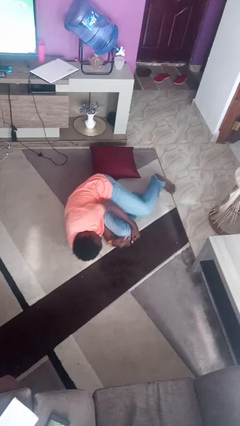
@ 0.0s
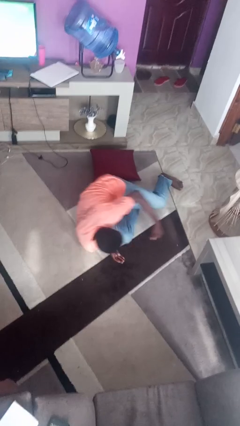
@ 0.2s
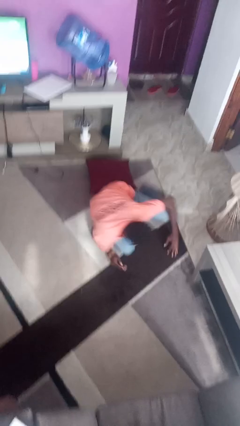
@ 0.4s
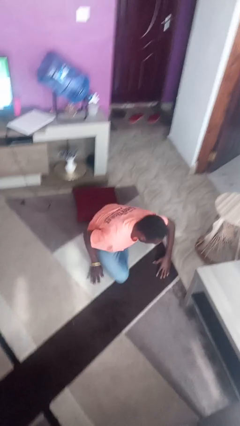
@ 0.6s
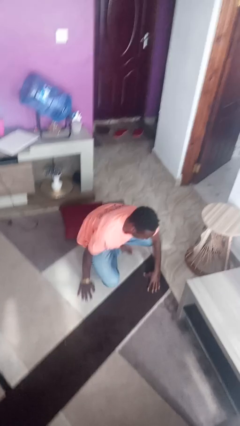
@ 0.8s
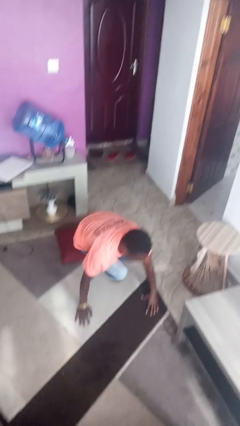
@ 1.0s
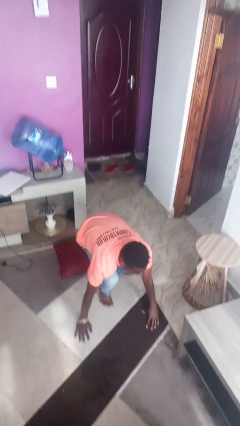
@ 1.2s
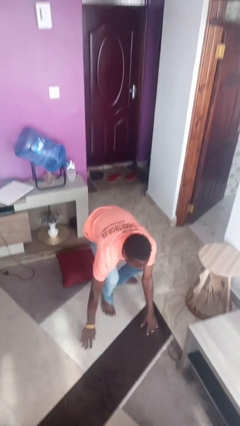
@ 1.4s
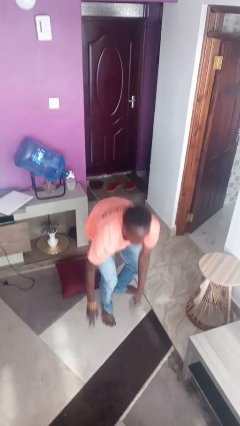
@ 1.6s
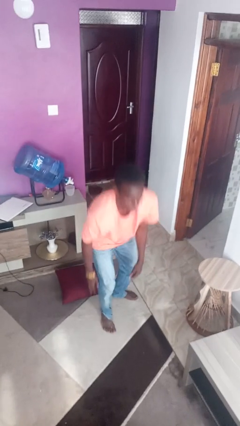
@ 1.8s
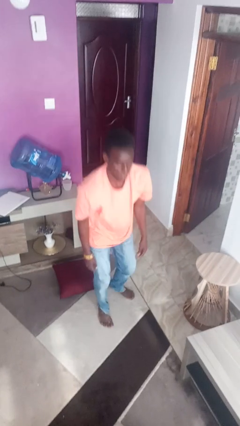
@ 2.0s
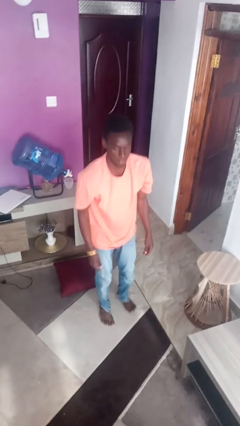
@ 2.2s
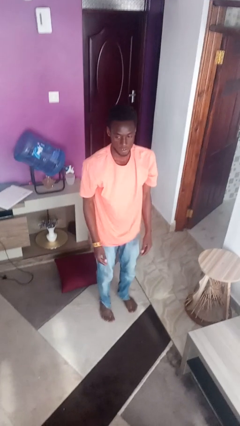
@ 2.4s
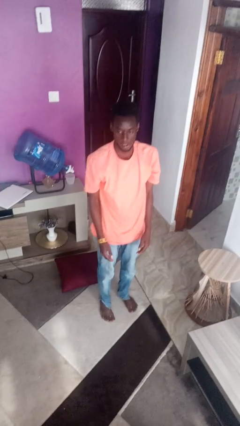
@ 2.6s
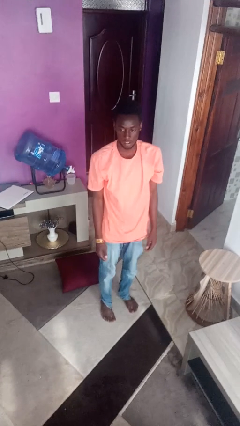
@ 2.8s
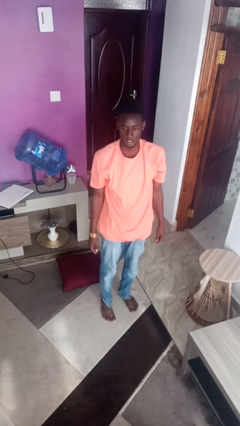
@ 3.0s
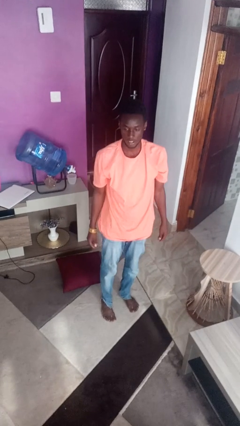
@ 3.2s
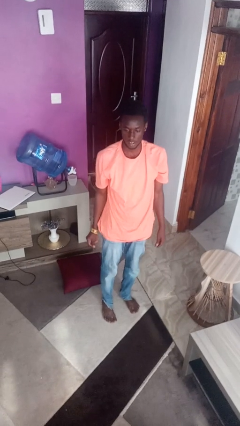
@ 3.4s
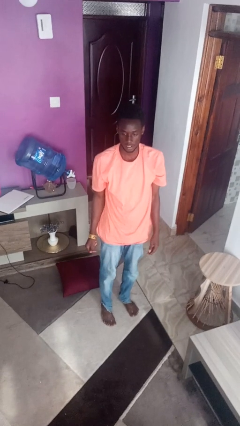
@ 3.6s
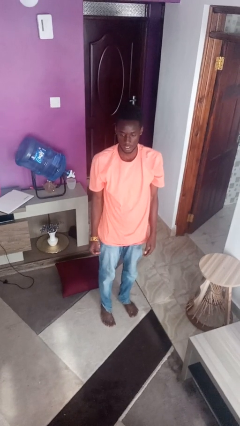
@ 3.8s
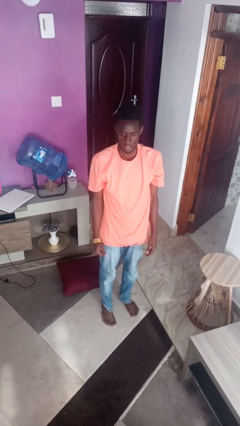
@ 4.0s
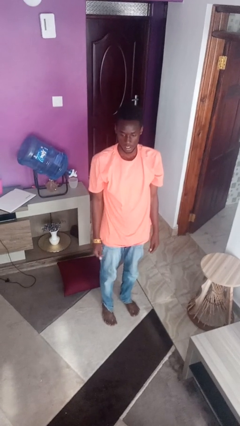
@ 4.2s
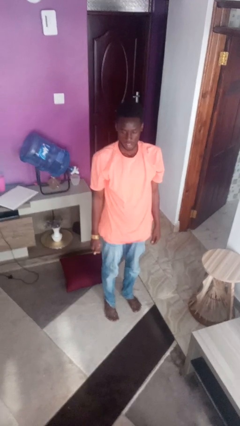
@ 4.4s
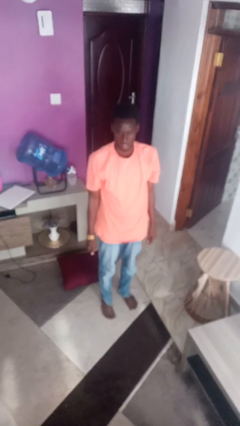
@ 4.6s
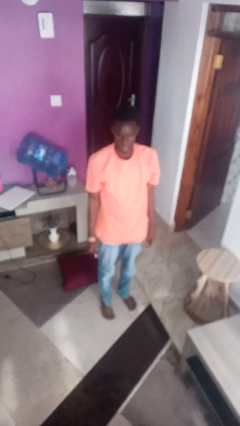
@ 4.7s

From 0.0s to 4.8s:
person stands up from floor

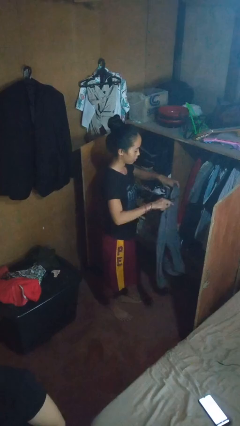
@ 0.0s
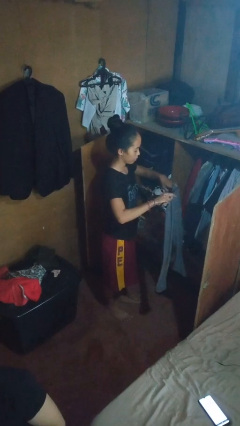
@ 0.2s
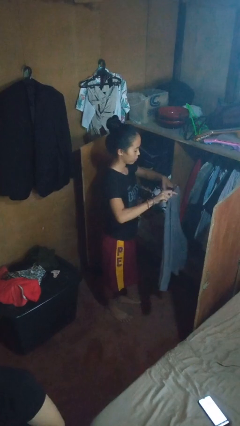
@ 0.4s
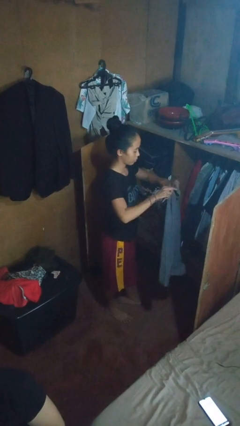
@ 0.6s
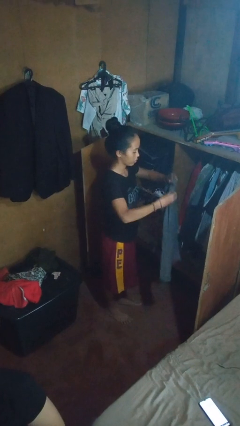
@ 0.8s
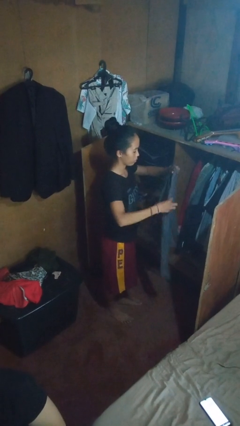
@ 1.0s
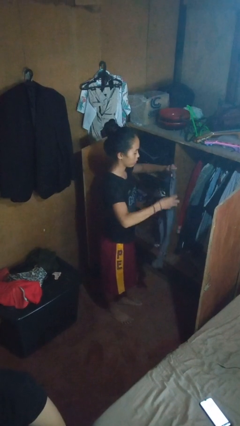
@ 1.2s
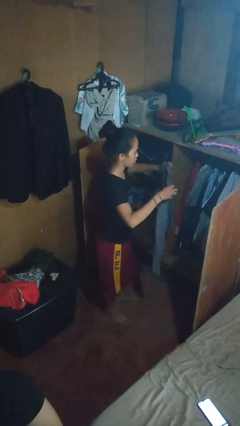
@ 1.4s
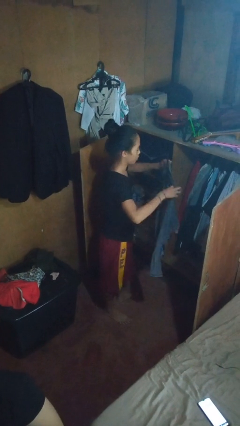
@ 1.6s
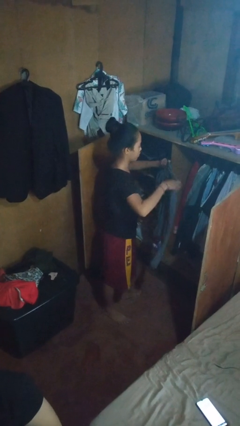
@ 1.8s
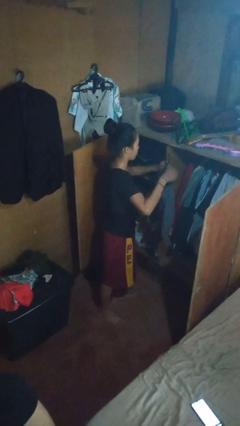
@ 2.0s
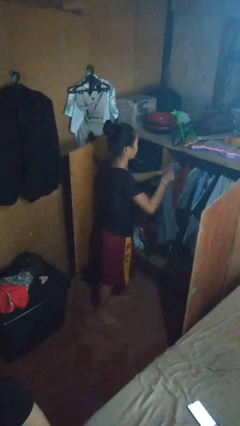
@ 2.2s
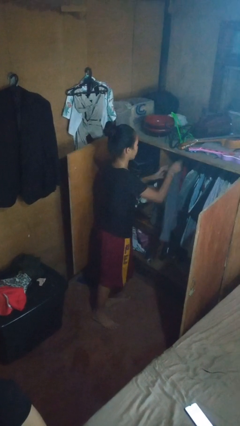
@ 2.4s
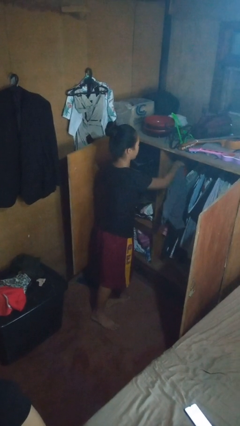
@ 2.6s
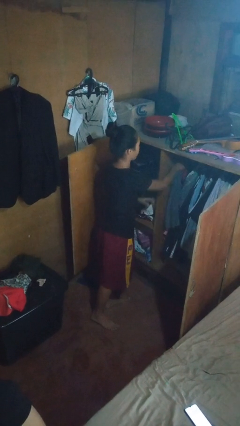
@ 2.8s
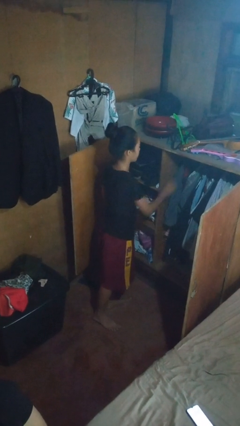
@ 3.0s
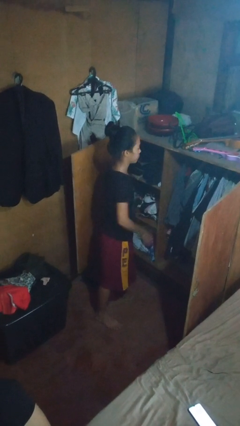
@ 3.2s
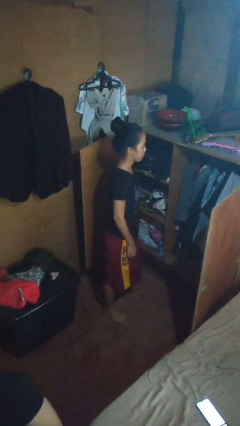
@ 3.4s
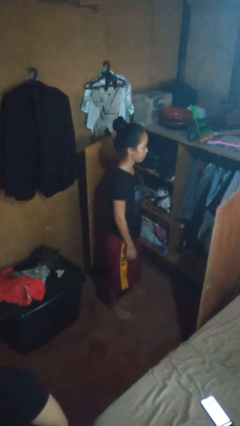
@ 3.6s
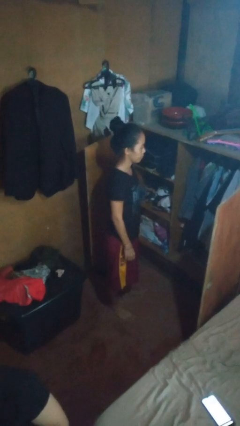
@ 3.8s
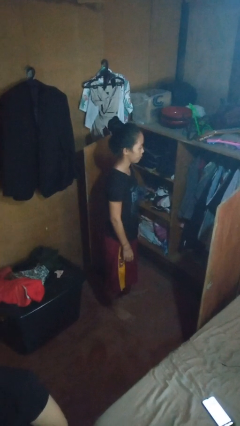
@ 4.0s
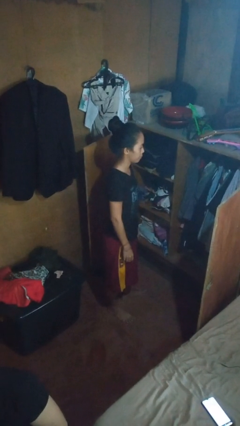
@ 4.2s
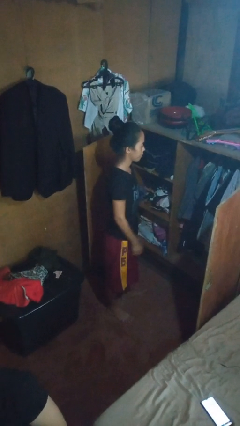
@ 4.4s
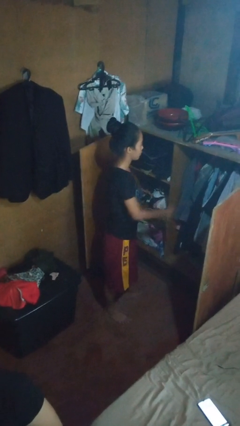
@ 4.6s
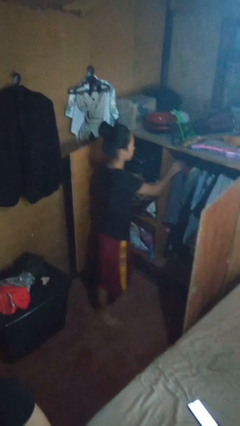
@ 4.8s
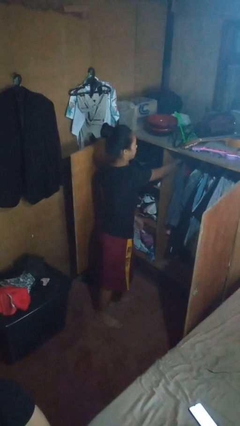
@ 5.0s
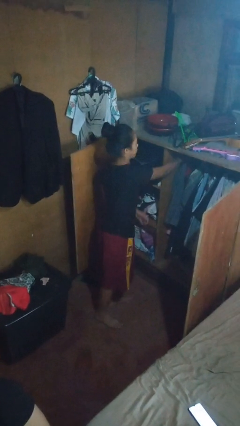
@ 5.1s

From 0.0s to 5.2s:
person puts clothes into closet

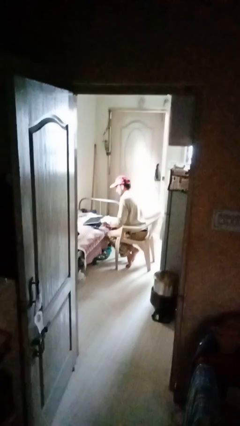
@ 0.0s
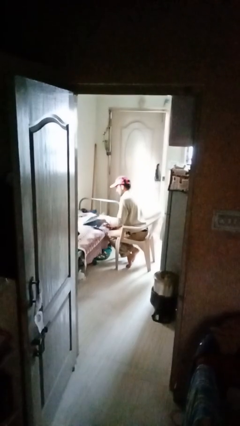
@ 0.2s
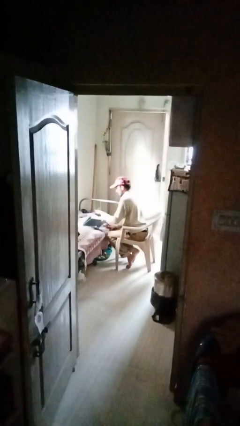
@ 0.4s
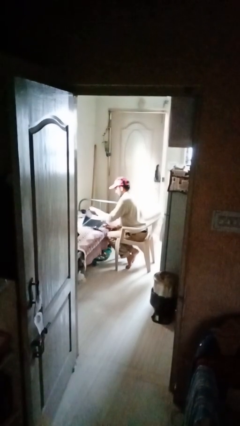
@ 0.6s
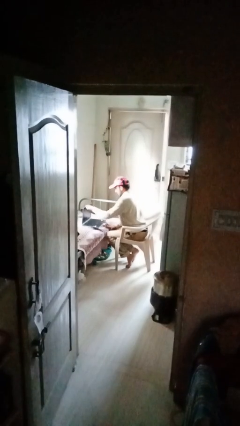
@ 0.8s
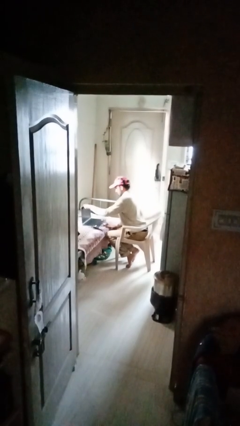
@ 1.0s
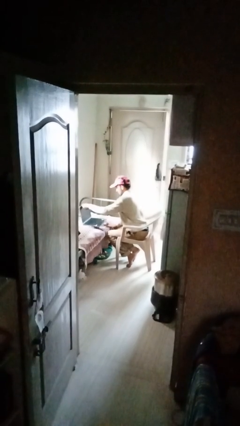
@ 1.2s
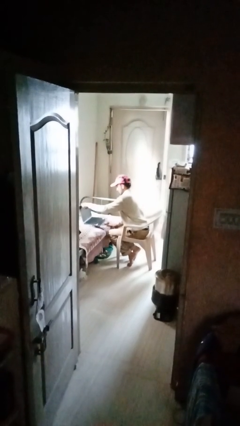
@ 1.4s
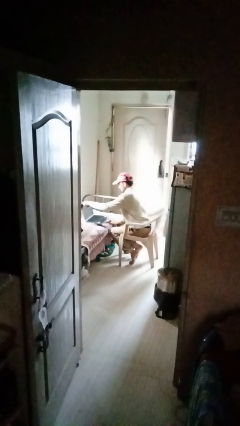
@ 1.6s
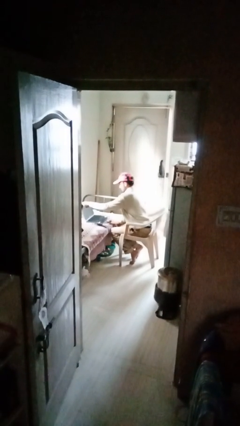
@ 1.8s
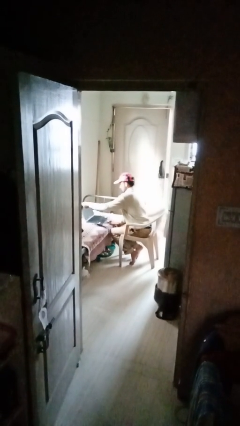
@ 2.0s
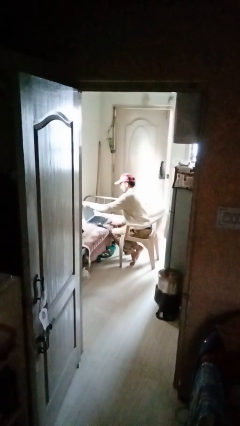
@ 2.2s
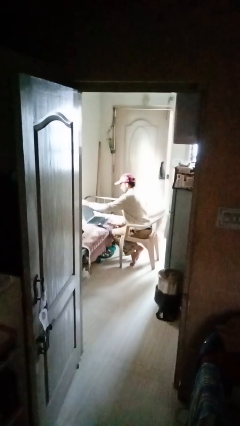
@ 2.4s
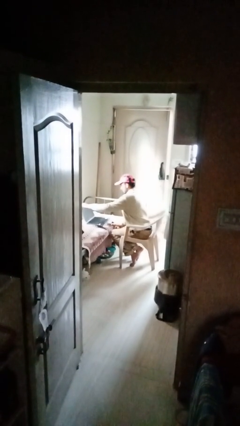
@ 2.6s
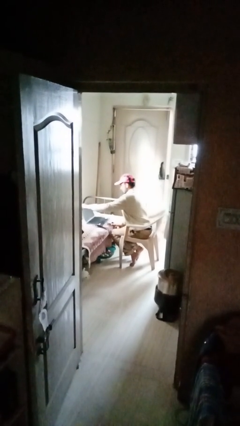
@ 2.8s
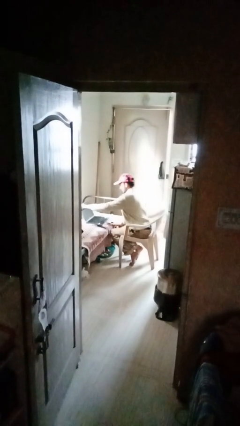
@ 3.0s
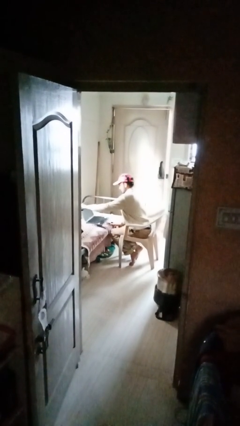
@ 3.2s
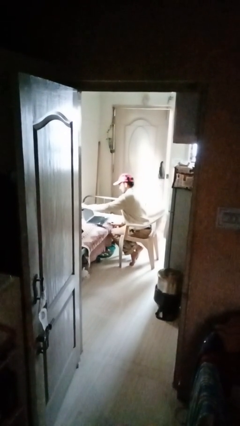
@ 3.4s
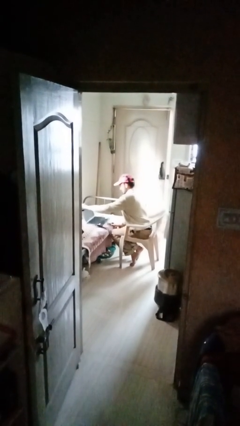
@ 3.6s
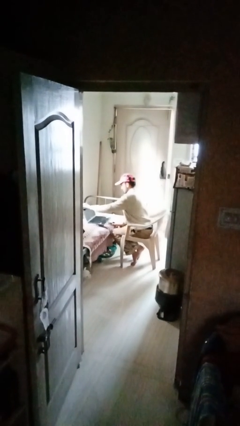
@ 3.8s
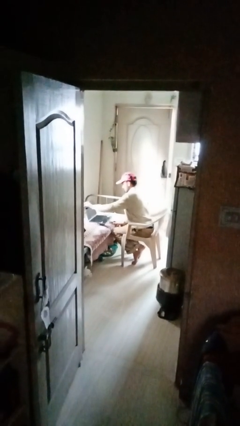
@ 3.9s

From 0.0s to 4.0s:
person opens laptop

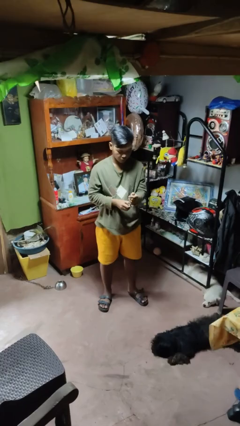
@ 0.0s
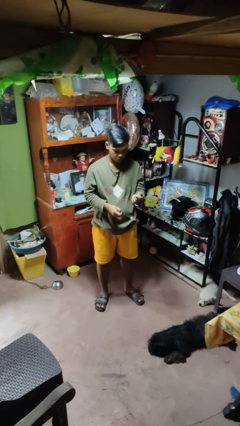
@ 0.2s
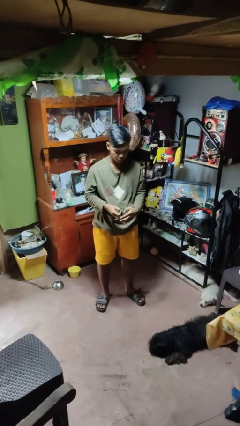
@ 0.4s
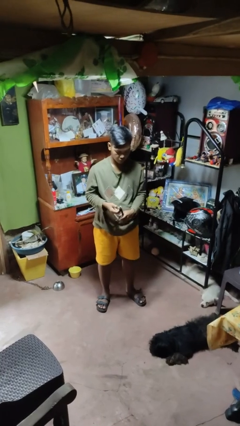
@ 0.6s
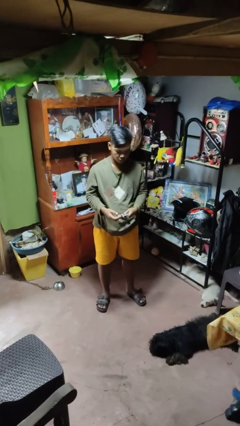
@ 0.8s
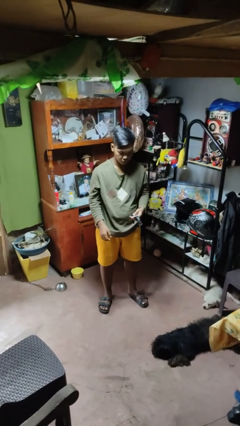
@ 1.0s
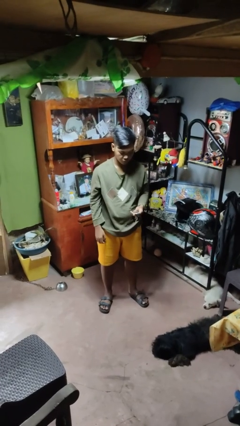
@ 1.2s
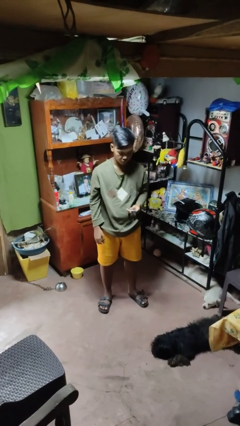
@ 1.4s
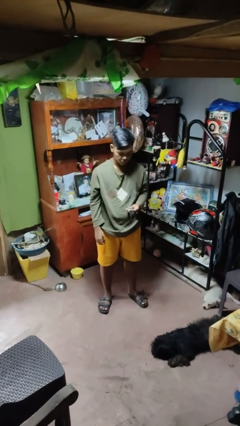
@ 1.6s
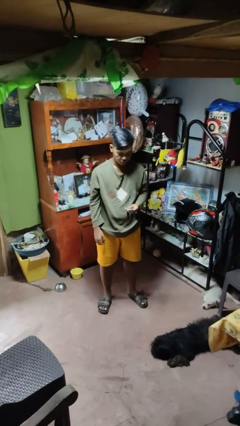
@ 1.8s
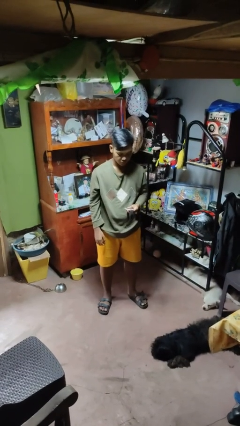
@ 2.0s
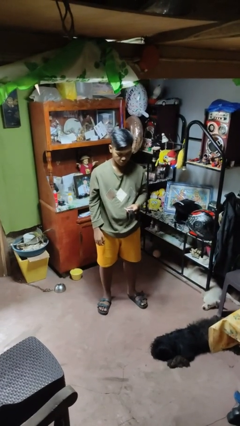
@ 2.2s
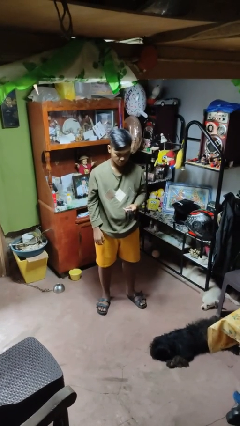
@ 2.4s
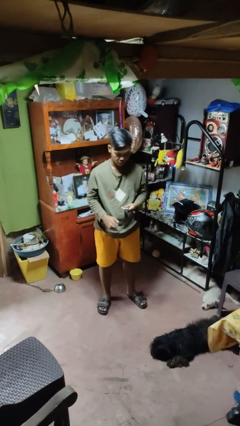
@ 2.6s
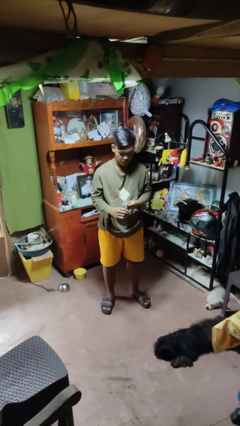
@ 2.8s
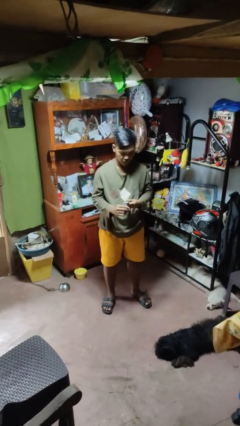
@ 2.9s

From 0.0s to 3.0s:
person takes off wristwatch

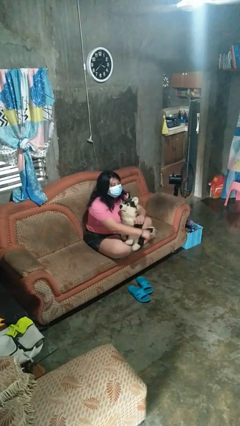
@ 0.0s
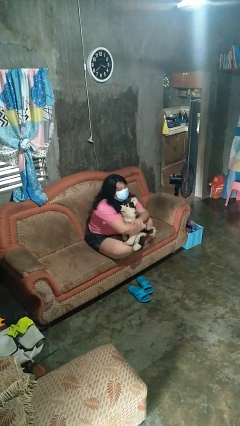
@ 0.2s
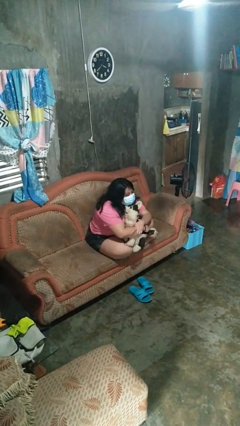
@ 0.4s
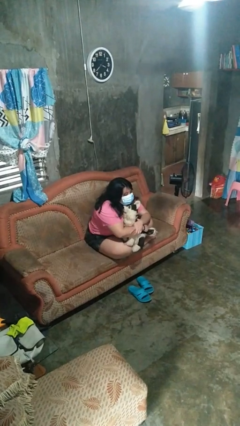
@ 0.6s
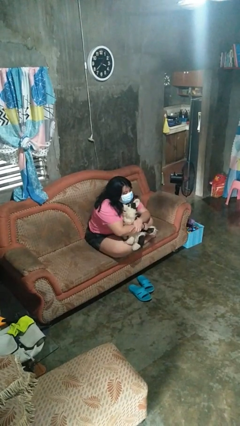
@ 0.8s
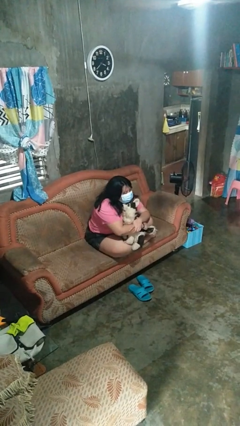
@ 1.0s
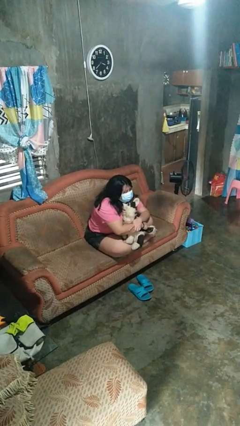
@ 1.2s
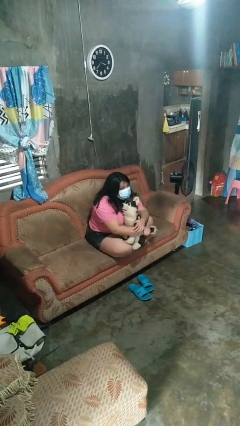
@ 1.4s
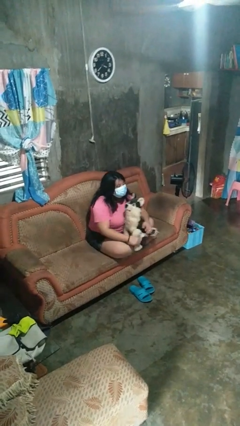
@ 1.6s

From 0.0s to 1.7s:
person hugs stuffed animal
